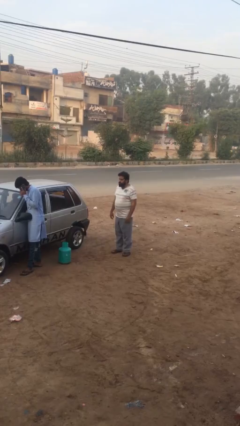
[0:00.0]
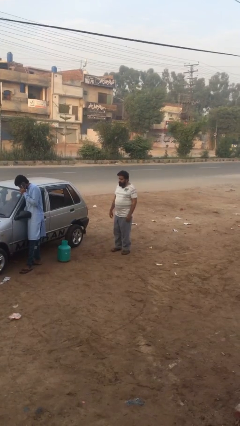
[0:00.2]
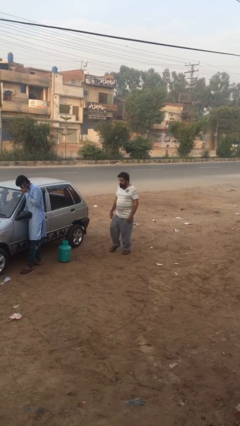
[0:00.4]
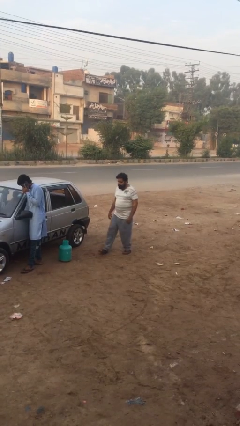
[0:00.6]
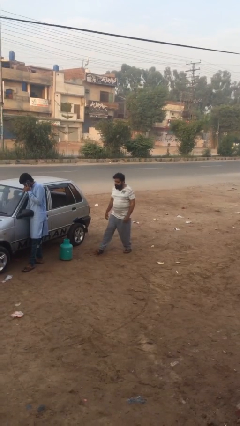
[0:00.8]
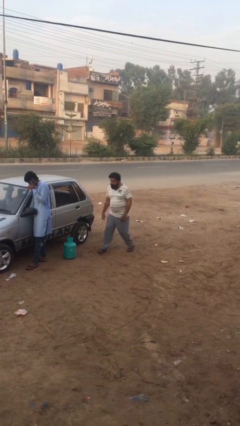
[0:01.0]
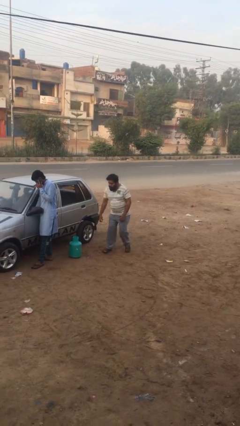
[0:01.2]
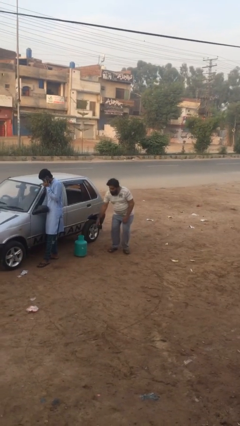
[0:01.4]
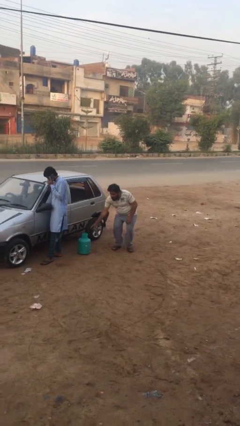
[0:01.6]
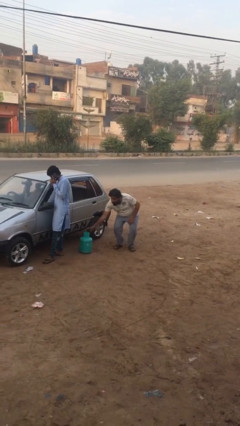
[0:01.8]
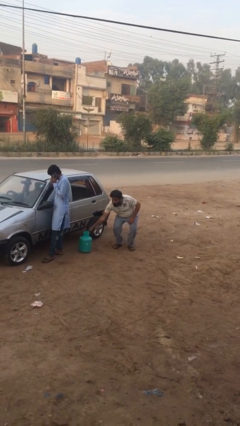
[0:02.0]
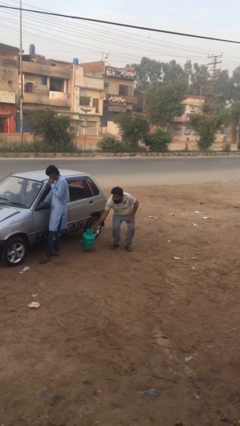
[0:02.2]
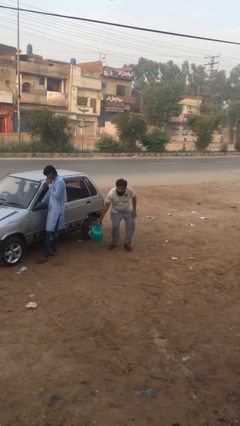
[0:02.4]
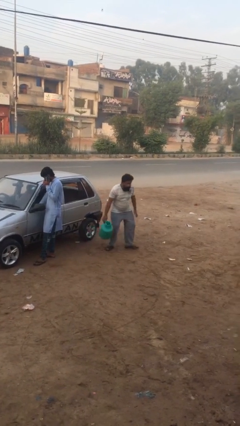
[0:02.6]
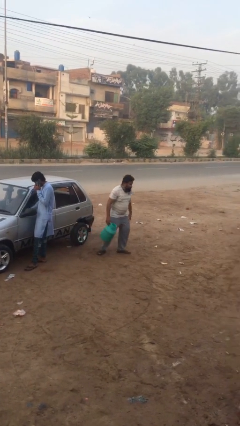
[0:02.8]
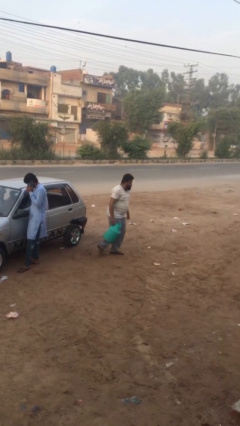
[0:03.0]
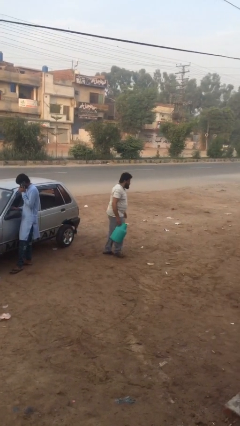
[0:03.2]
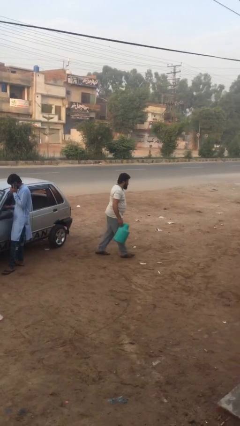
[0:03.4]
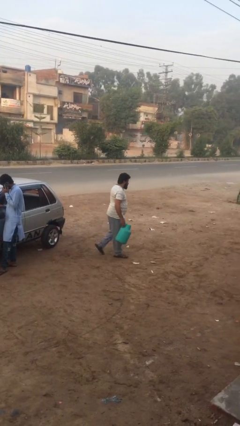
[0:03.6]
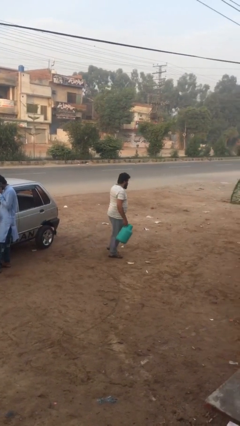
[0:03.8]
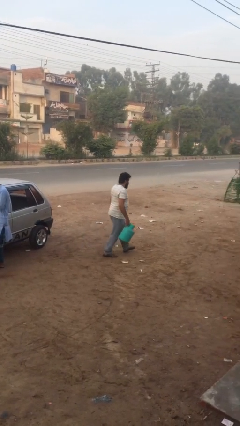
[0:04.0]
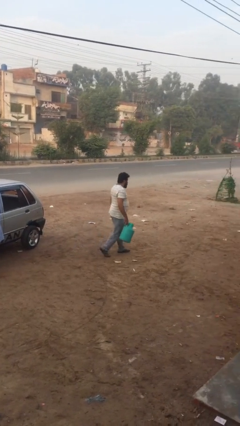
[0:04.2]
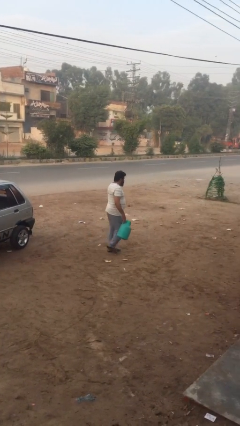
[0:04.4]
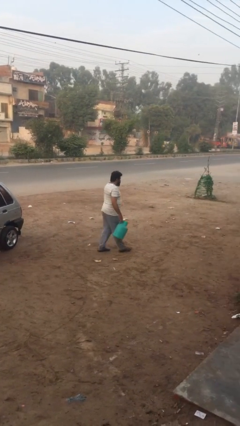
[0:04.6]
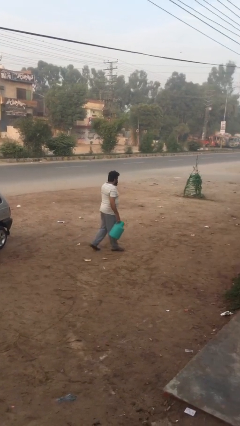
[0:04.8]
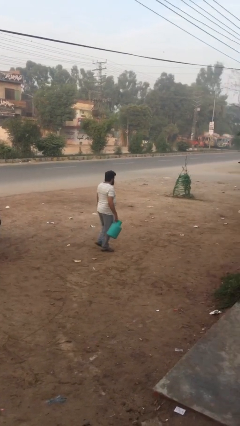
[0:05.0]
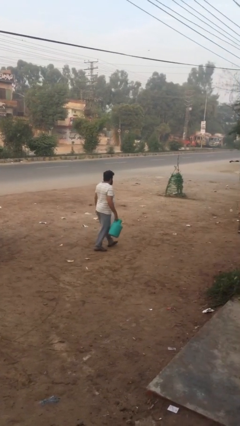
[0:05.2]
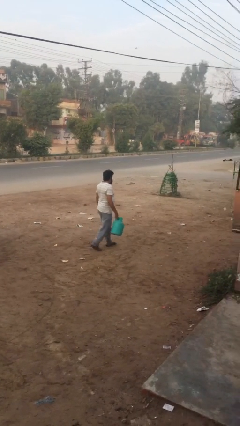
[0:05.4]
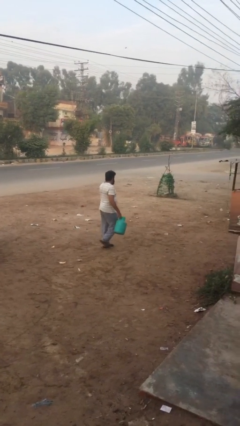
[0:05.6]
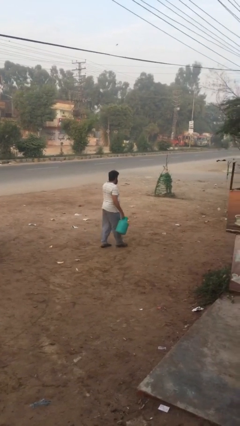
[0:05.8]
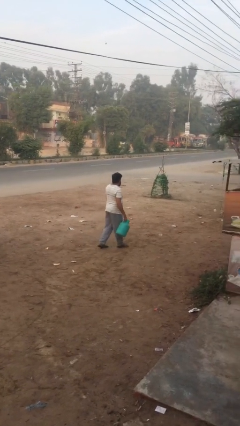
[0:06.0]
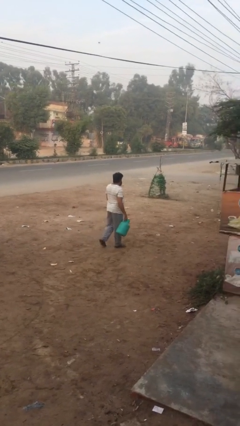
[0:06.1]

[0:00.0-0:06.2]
person steals object from person

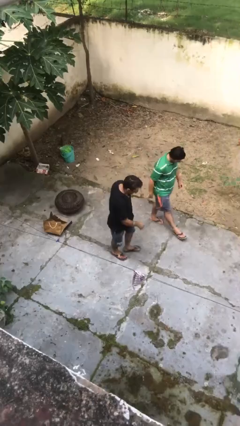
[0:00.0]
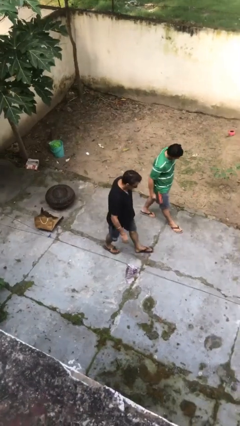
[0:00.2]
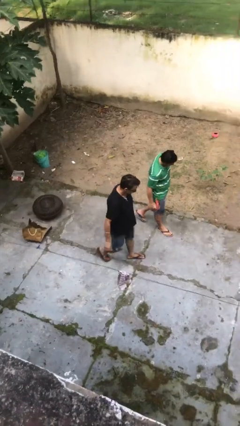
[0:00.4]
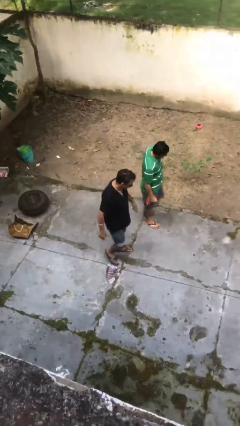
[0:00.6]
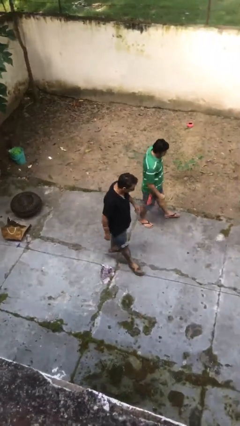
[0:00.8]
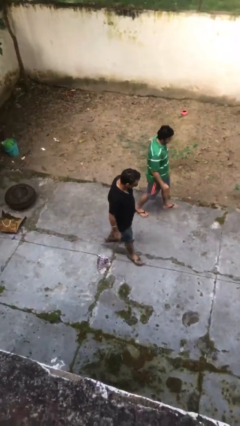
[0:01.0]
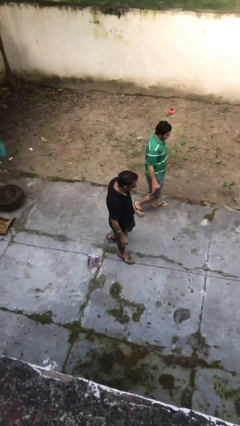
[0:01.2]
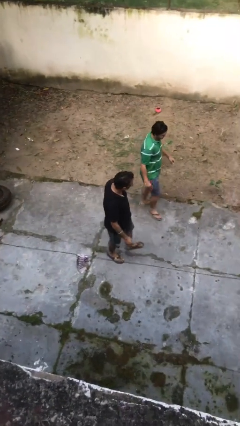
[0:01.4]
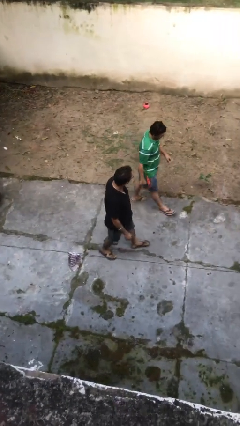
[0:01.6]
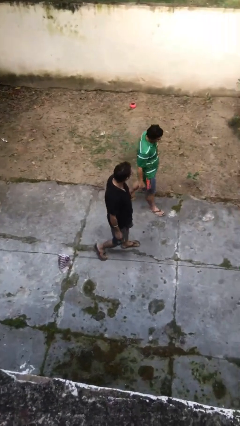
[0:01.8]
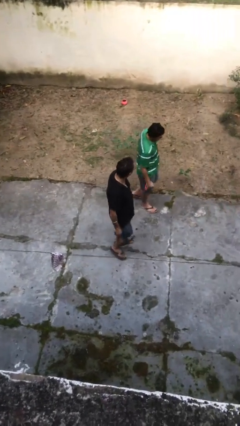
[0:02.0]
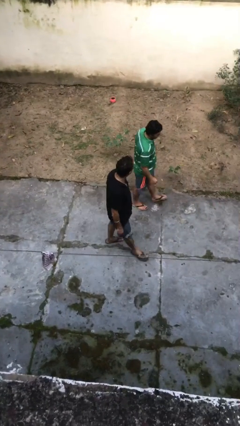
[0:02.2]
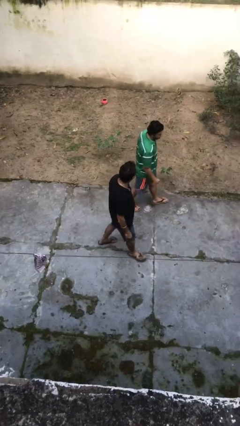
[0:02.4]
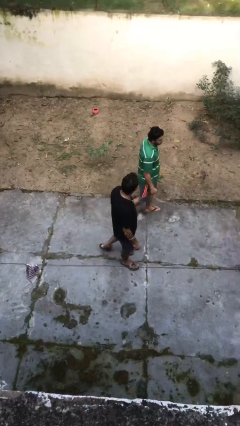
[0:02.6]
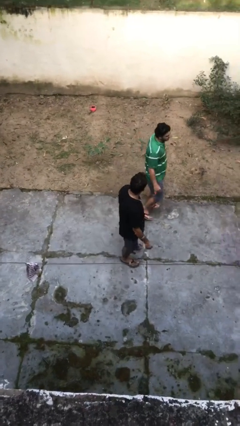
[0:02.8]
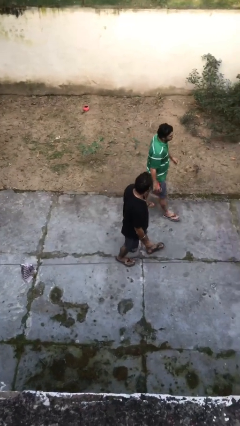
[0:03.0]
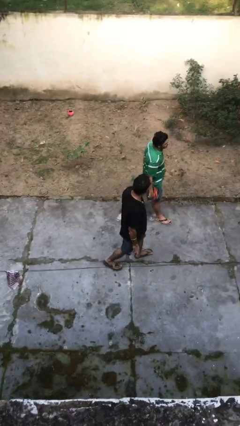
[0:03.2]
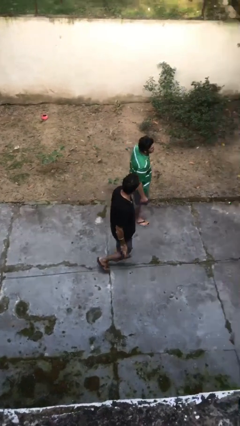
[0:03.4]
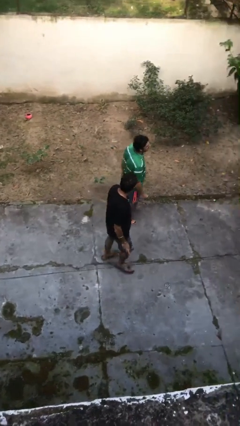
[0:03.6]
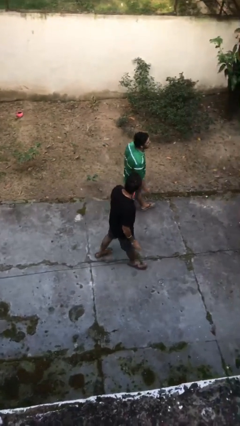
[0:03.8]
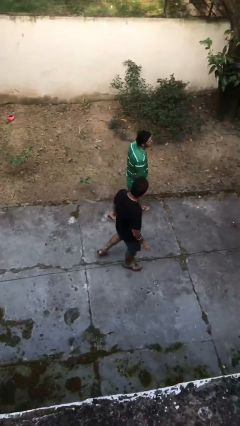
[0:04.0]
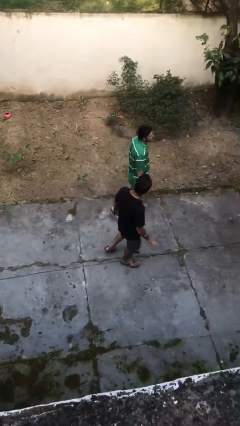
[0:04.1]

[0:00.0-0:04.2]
person talks to person

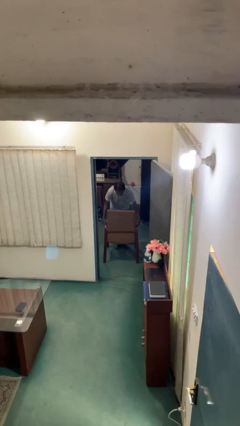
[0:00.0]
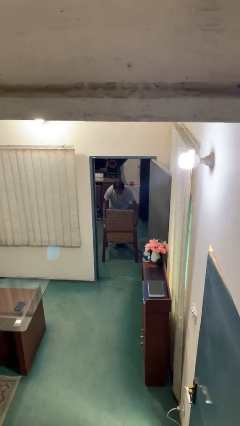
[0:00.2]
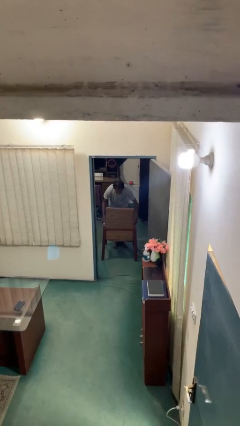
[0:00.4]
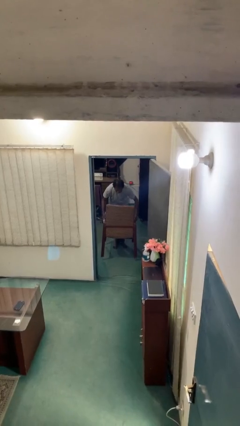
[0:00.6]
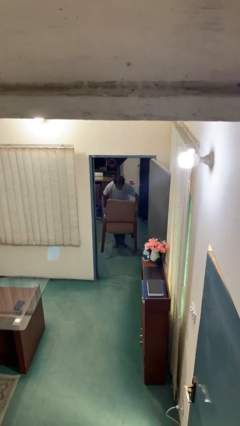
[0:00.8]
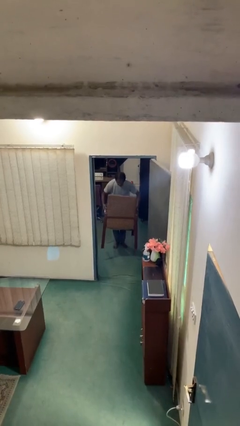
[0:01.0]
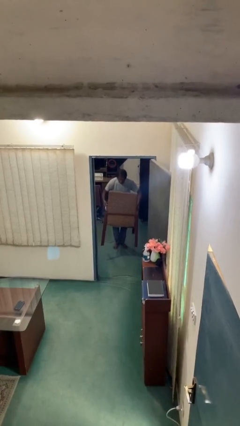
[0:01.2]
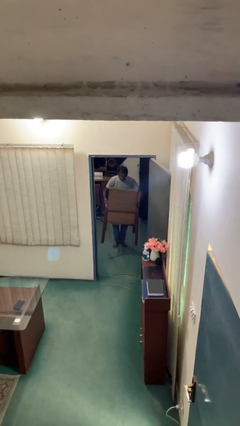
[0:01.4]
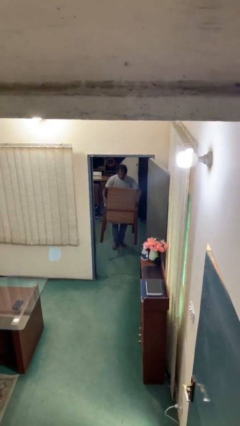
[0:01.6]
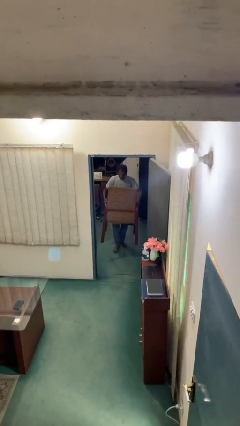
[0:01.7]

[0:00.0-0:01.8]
person picks up object from floor

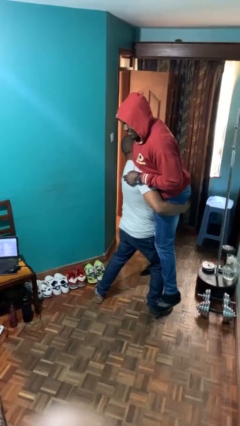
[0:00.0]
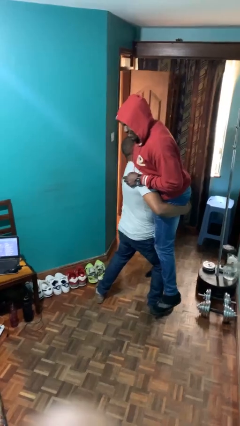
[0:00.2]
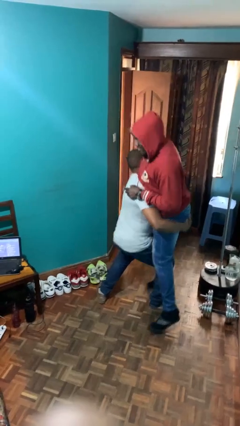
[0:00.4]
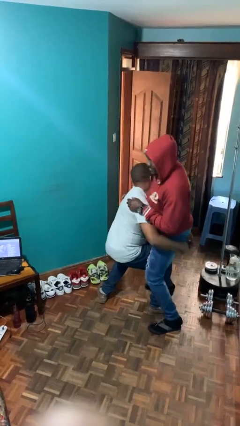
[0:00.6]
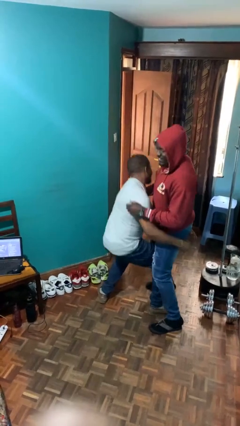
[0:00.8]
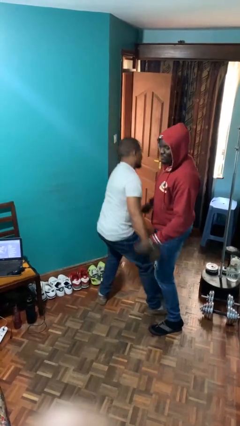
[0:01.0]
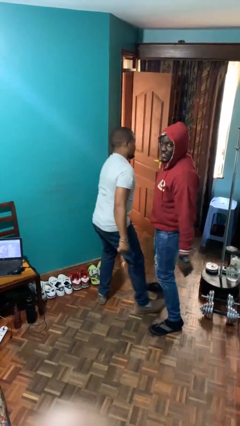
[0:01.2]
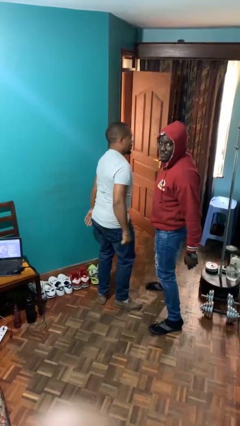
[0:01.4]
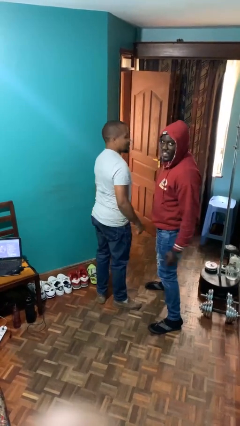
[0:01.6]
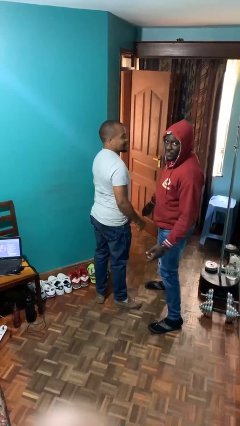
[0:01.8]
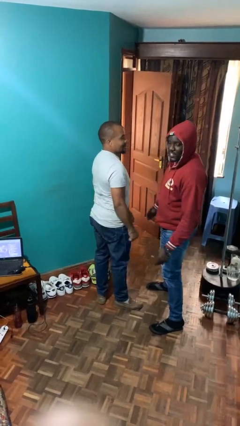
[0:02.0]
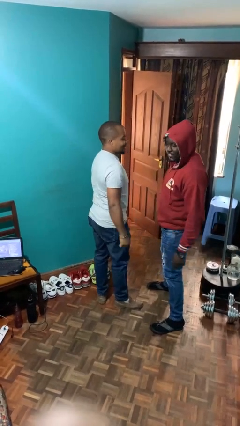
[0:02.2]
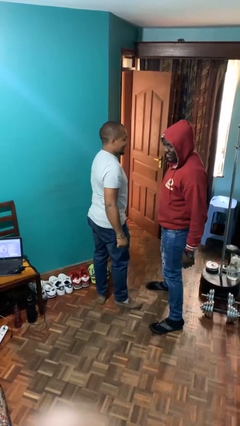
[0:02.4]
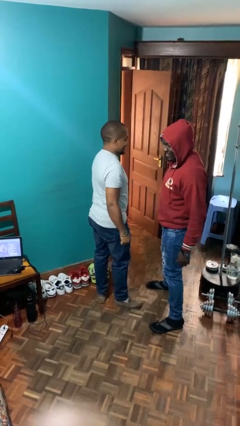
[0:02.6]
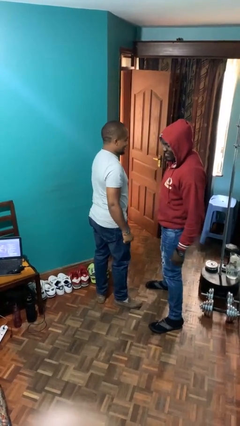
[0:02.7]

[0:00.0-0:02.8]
person puts down person

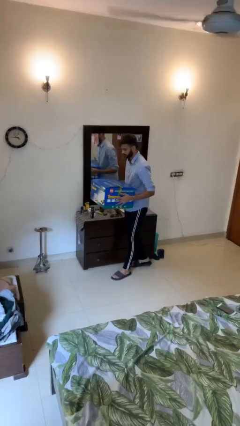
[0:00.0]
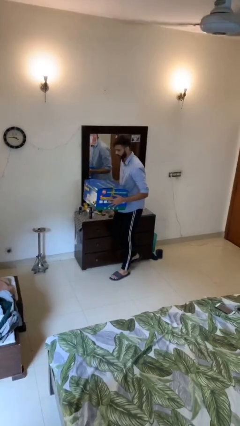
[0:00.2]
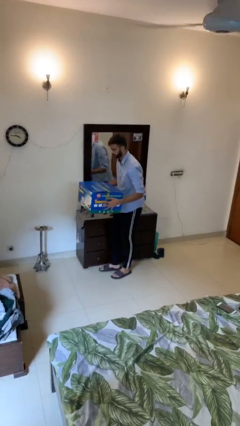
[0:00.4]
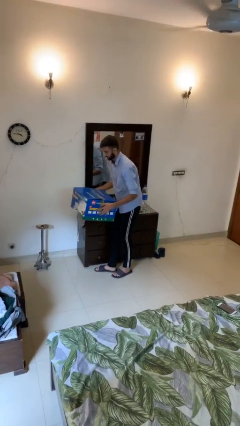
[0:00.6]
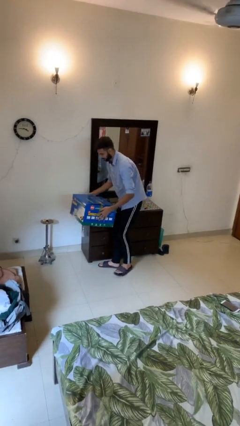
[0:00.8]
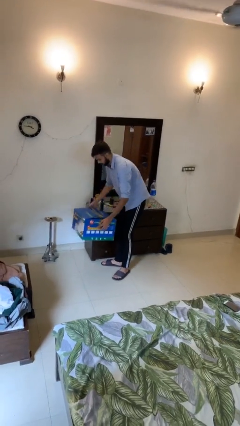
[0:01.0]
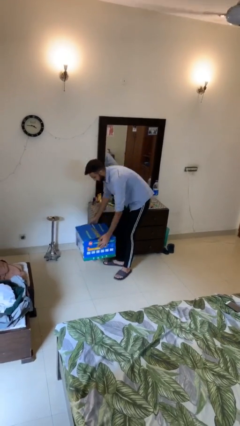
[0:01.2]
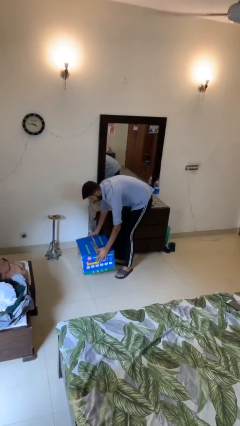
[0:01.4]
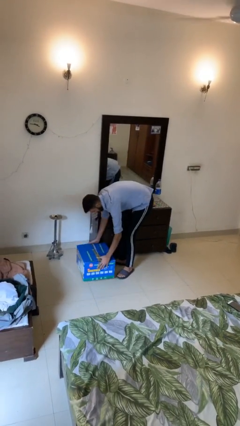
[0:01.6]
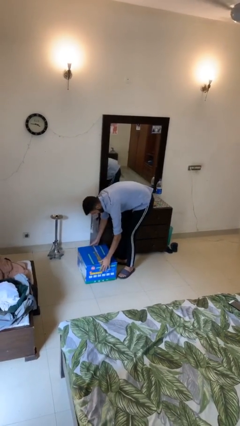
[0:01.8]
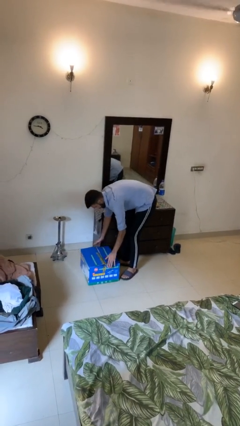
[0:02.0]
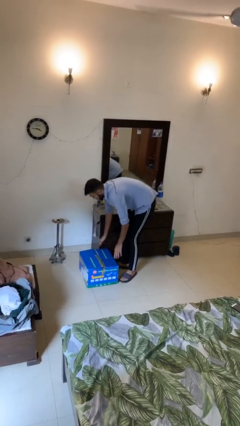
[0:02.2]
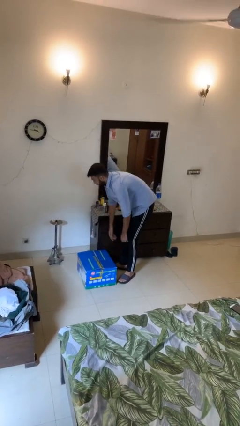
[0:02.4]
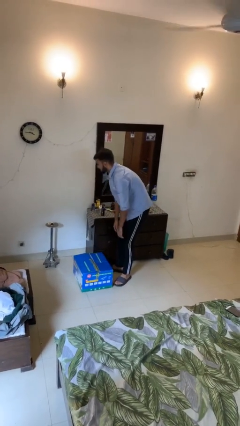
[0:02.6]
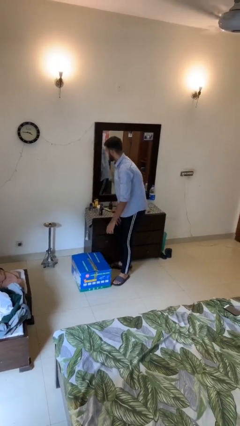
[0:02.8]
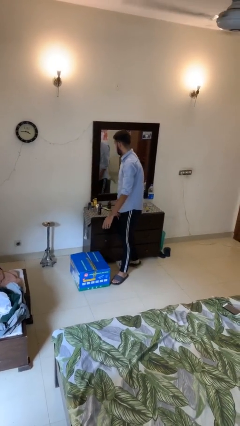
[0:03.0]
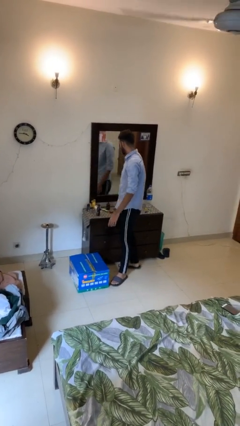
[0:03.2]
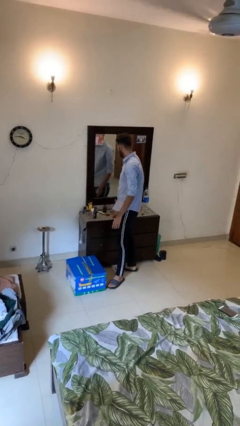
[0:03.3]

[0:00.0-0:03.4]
person puts down object on floor
